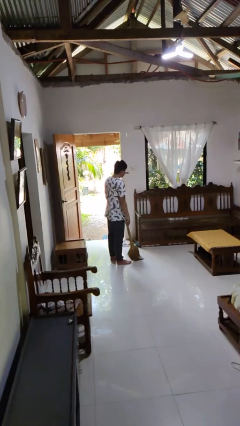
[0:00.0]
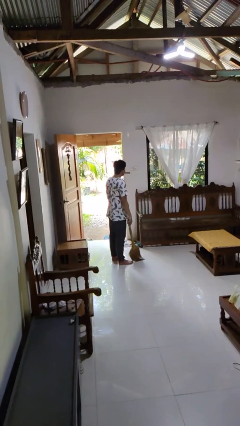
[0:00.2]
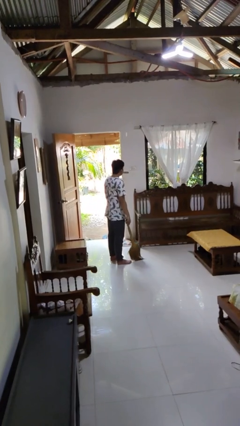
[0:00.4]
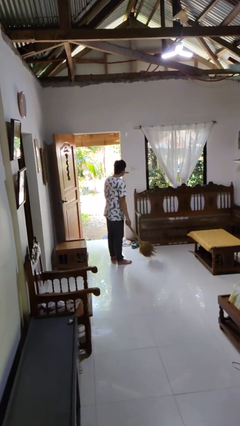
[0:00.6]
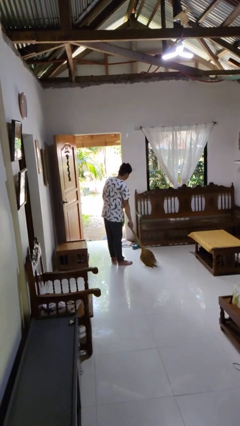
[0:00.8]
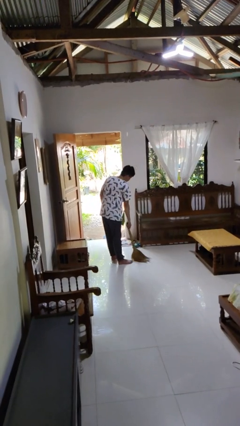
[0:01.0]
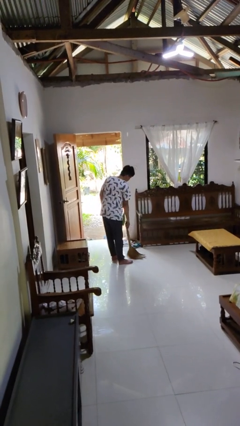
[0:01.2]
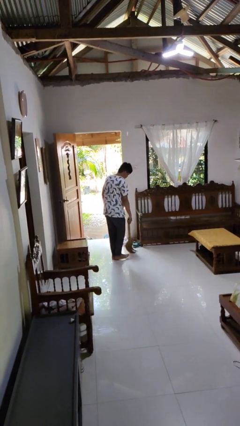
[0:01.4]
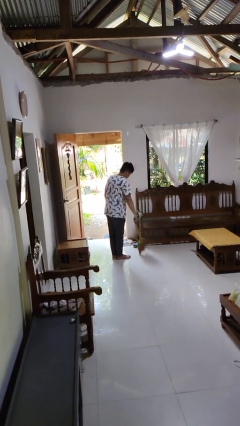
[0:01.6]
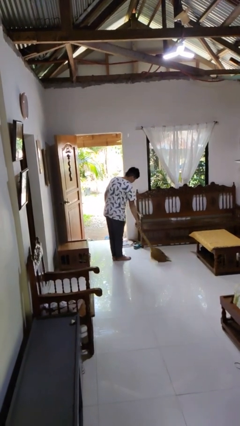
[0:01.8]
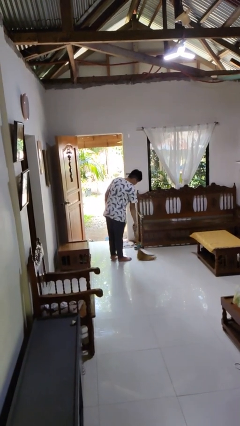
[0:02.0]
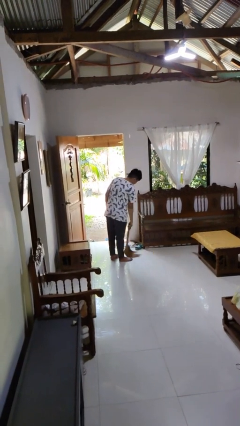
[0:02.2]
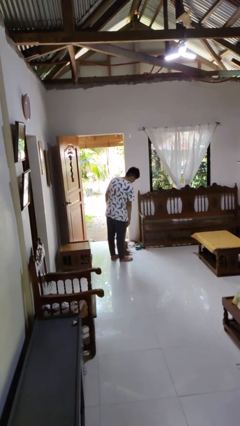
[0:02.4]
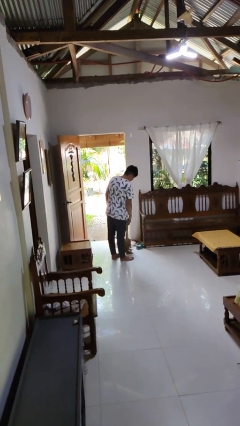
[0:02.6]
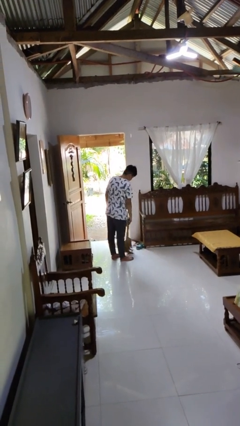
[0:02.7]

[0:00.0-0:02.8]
person sweeps floor

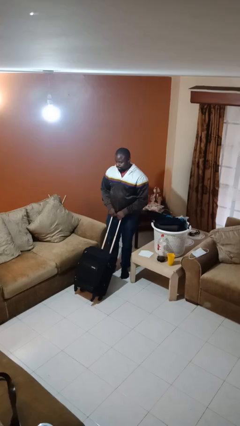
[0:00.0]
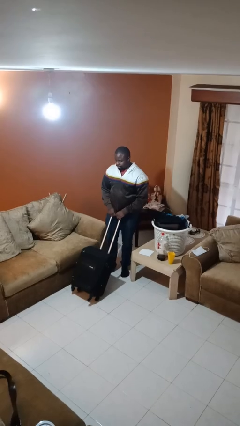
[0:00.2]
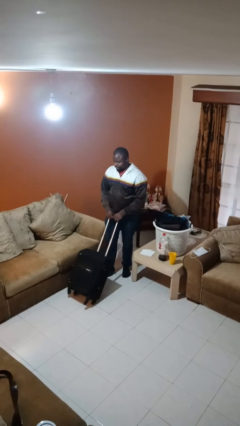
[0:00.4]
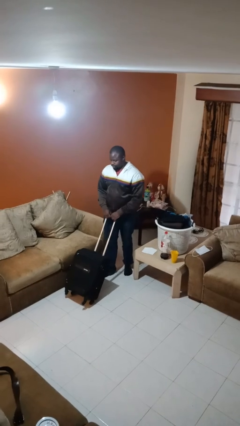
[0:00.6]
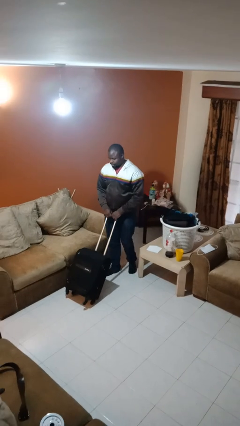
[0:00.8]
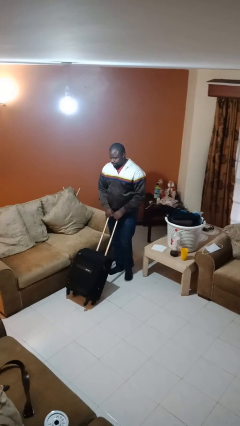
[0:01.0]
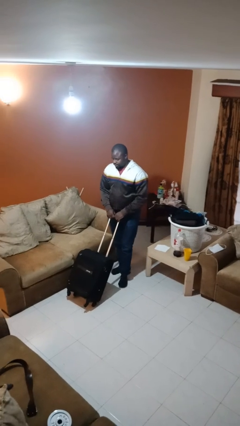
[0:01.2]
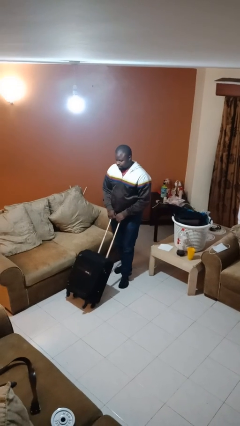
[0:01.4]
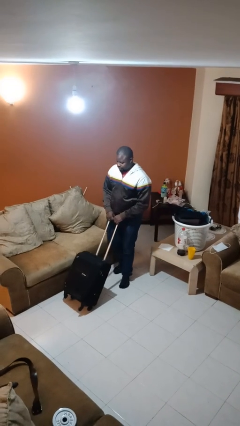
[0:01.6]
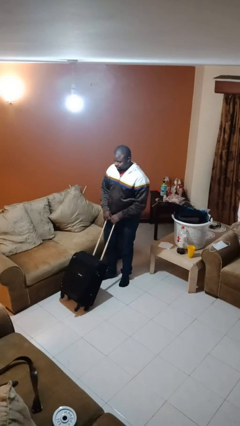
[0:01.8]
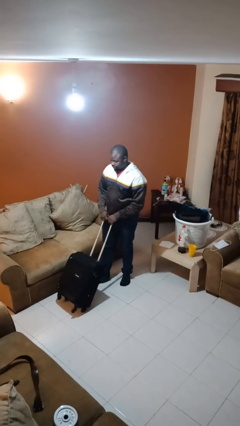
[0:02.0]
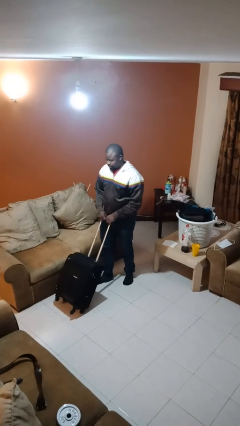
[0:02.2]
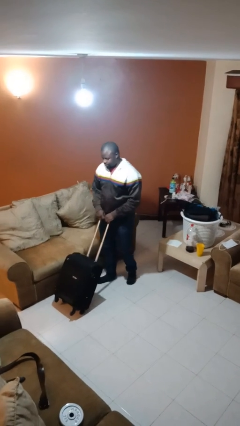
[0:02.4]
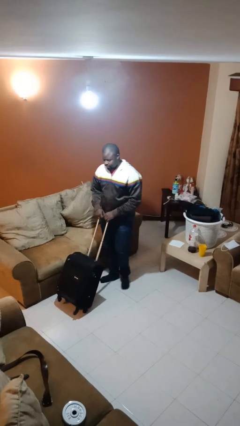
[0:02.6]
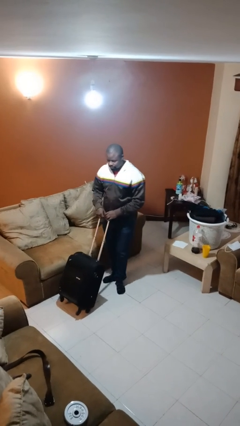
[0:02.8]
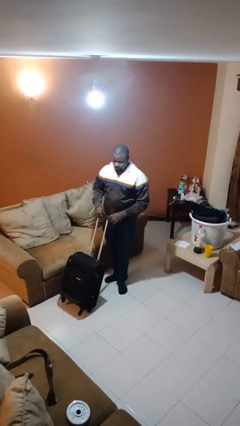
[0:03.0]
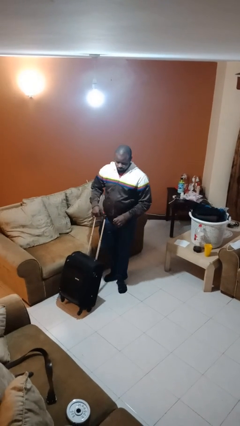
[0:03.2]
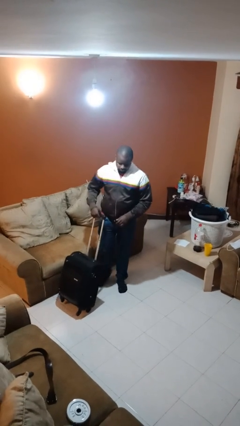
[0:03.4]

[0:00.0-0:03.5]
person pushes wheeled cart

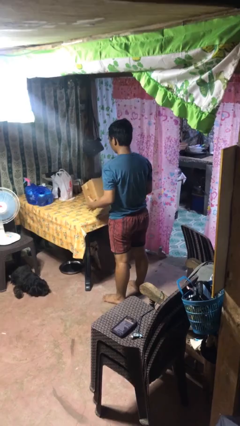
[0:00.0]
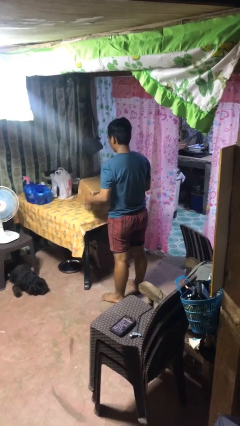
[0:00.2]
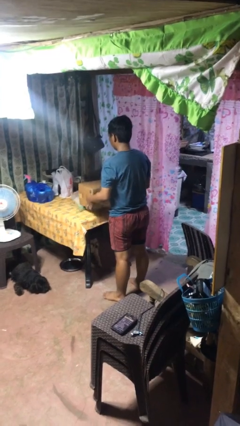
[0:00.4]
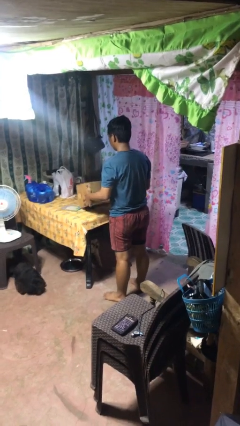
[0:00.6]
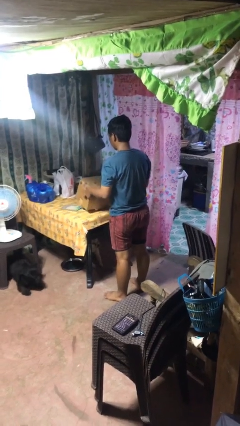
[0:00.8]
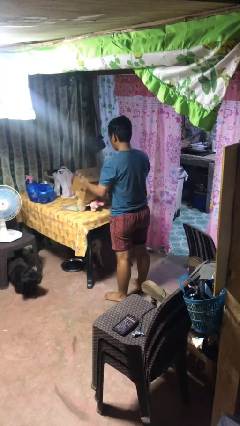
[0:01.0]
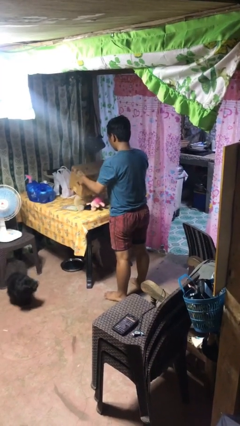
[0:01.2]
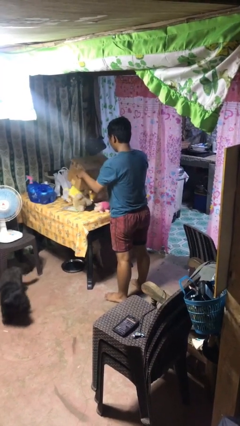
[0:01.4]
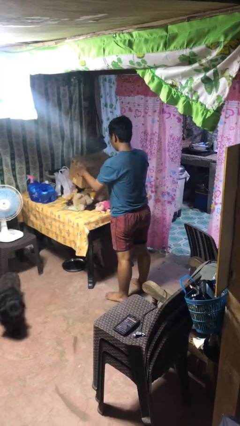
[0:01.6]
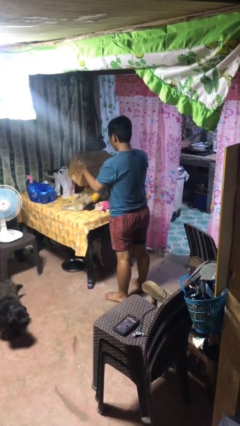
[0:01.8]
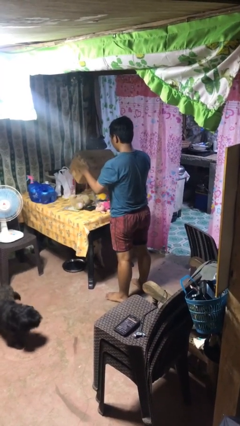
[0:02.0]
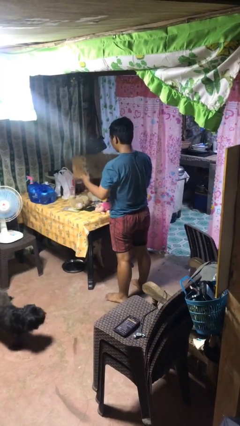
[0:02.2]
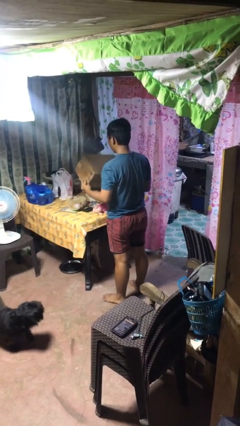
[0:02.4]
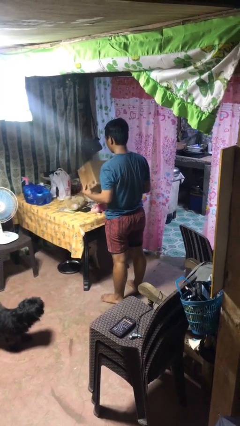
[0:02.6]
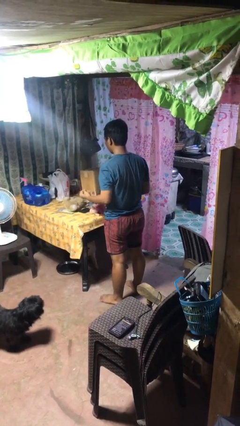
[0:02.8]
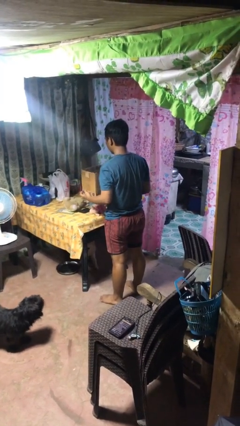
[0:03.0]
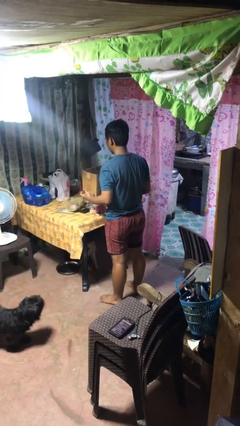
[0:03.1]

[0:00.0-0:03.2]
person unloads box onto table

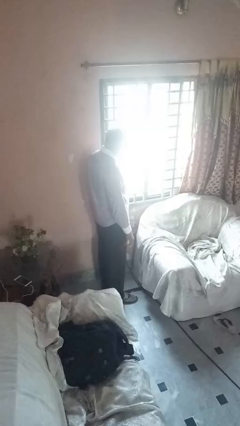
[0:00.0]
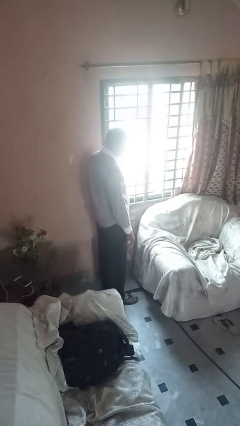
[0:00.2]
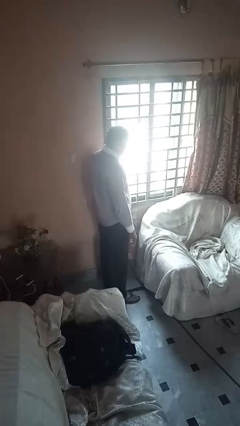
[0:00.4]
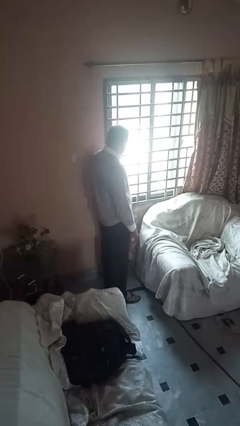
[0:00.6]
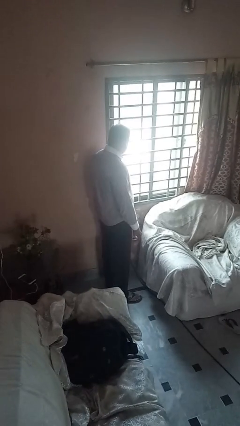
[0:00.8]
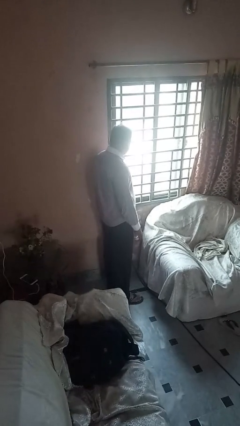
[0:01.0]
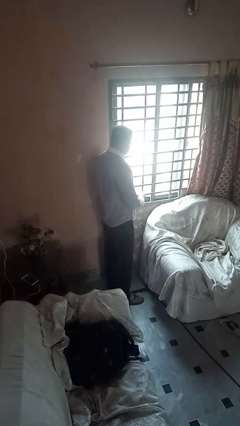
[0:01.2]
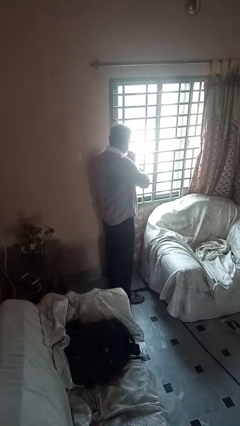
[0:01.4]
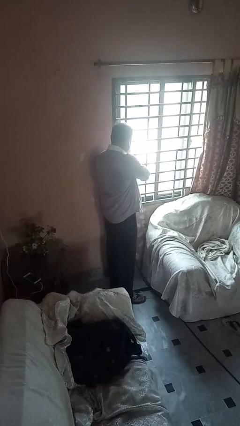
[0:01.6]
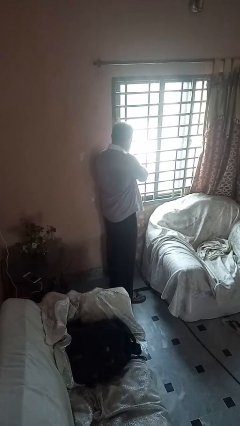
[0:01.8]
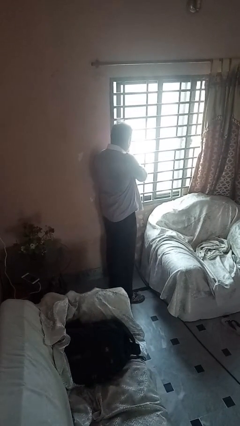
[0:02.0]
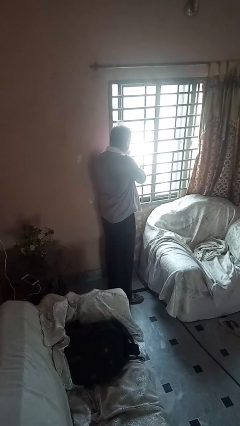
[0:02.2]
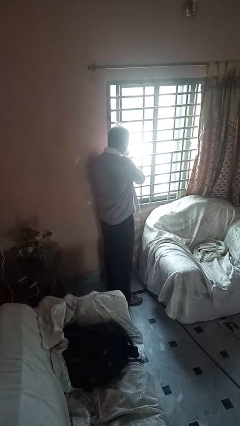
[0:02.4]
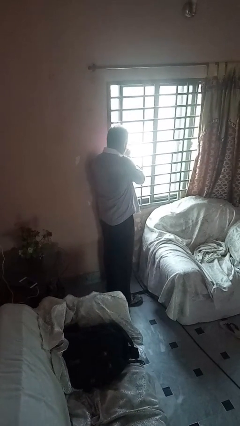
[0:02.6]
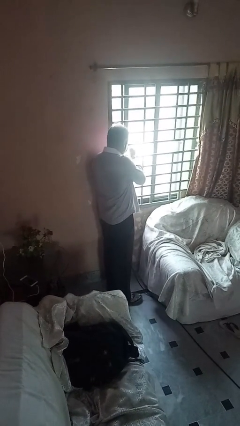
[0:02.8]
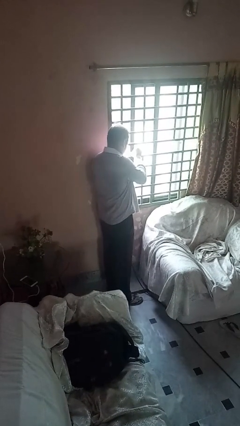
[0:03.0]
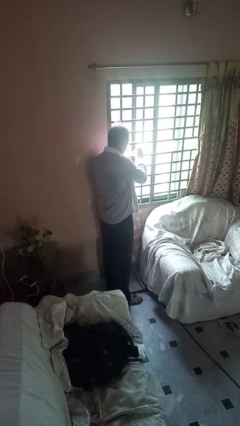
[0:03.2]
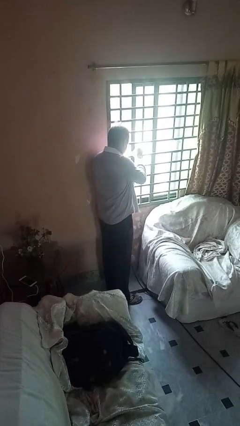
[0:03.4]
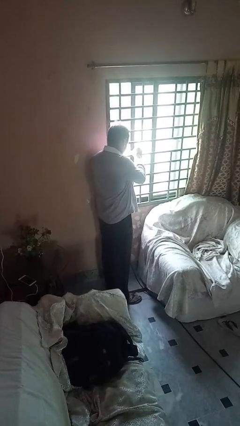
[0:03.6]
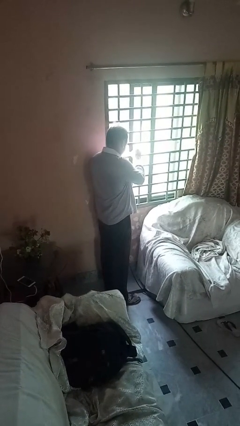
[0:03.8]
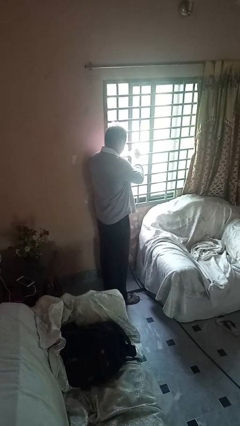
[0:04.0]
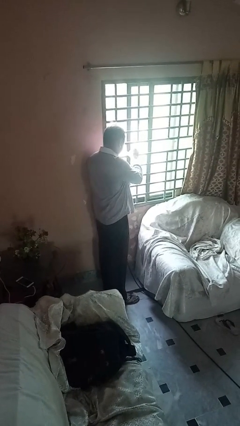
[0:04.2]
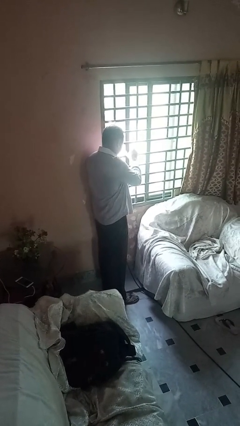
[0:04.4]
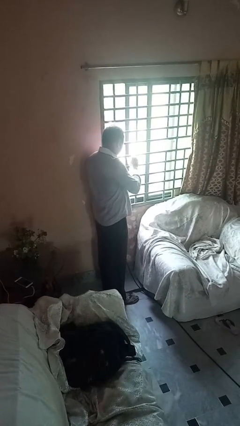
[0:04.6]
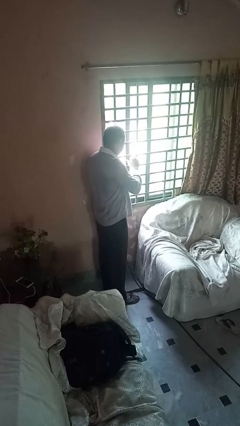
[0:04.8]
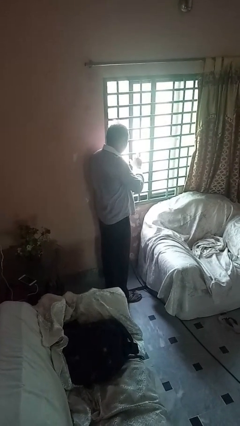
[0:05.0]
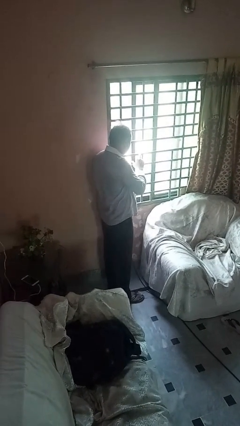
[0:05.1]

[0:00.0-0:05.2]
person opens sliding door

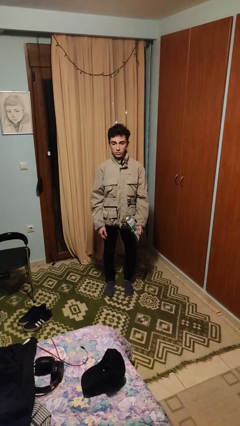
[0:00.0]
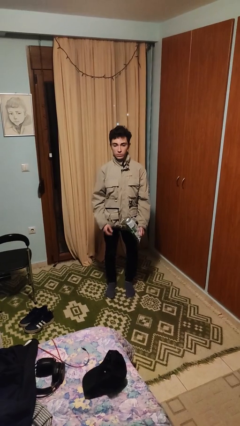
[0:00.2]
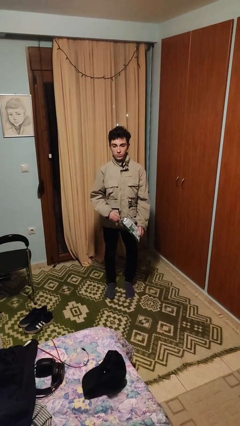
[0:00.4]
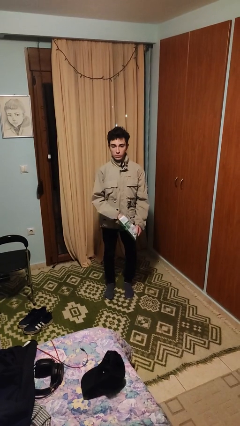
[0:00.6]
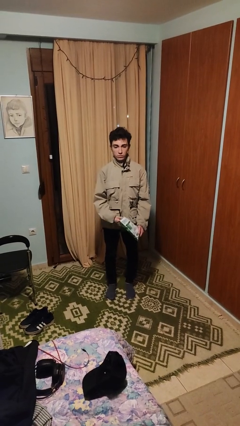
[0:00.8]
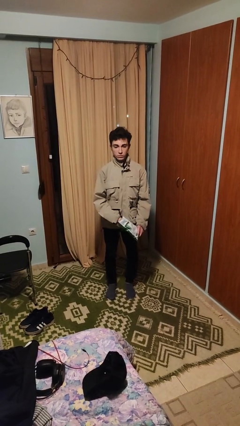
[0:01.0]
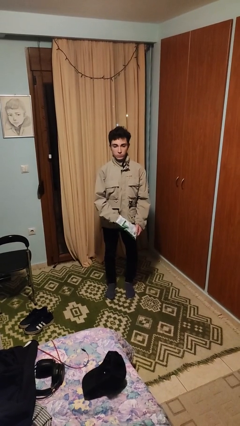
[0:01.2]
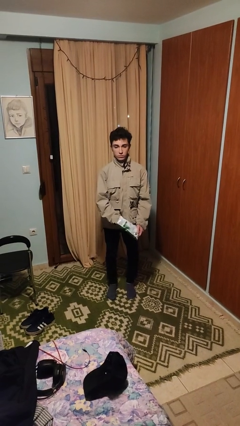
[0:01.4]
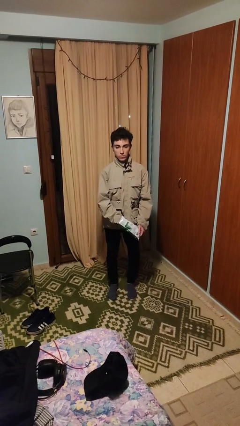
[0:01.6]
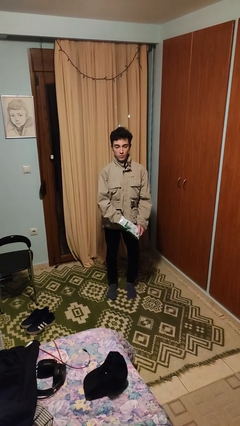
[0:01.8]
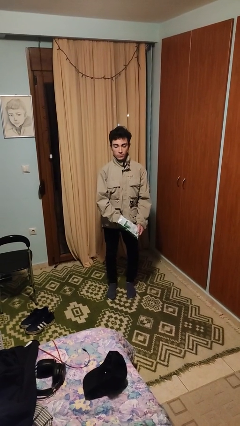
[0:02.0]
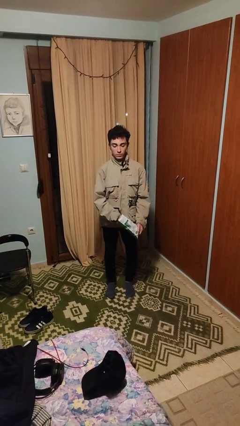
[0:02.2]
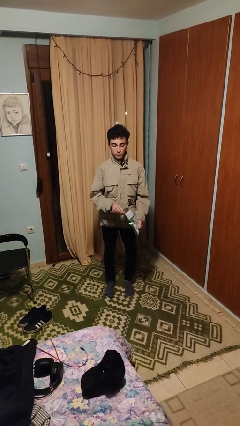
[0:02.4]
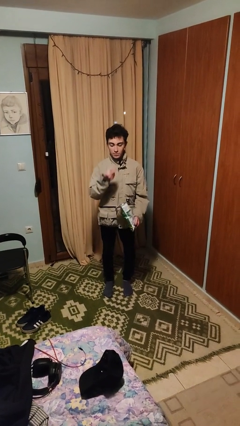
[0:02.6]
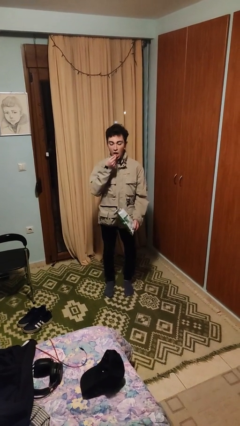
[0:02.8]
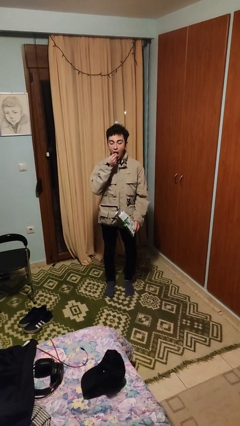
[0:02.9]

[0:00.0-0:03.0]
person eats snack from bag
